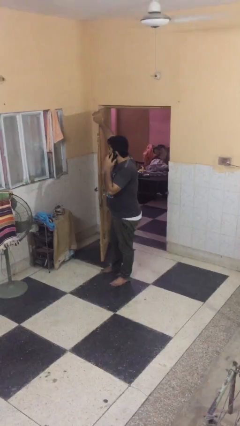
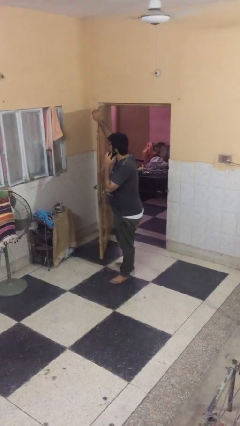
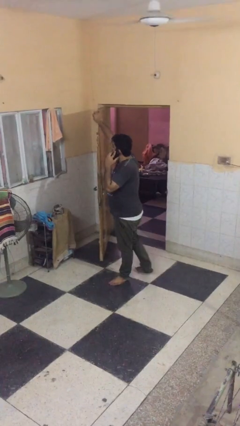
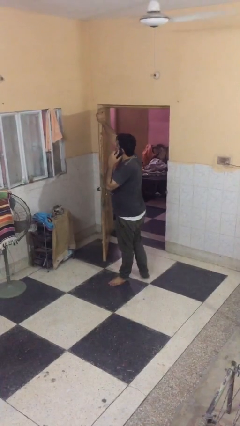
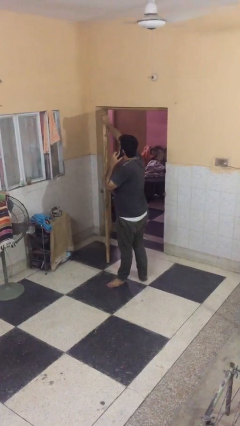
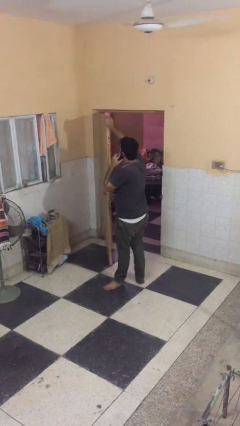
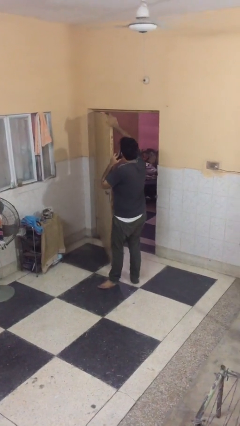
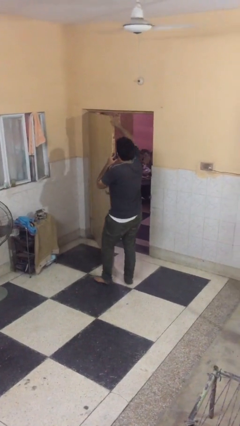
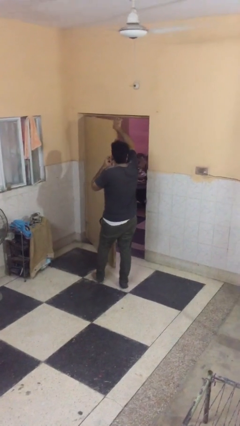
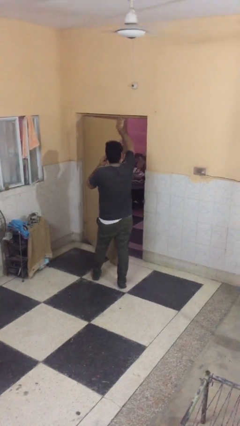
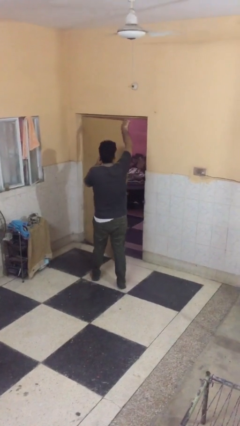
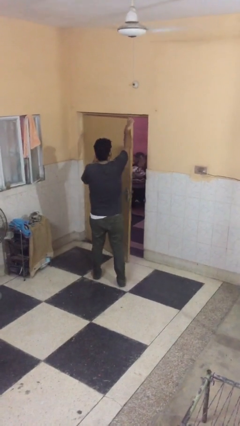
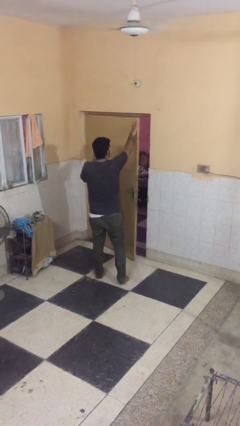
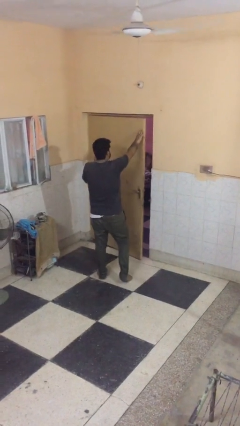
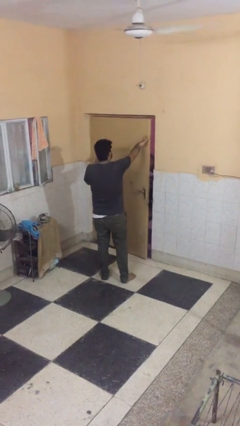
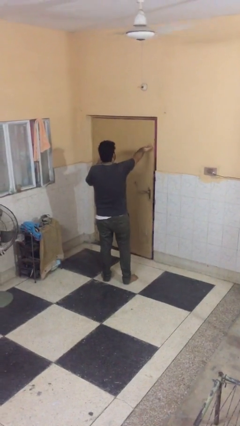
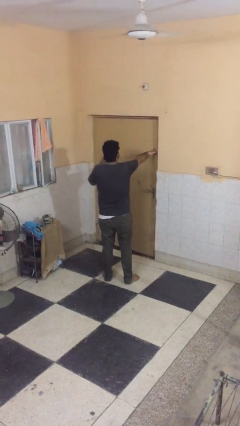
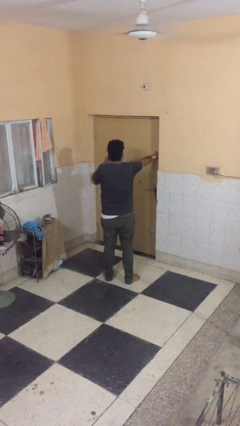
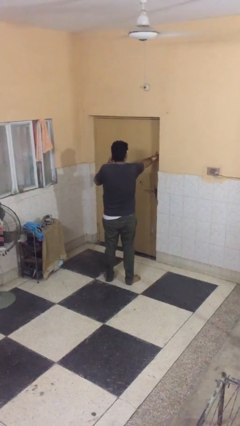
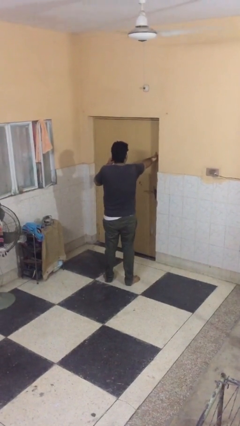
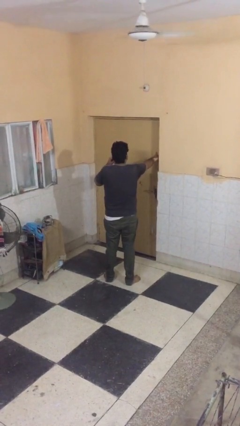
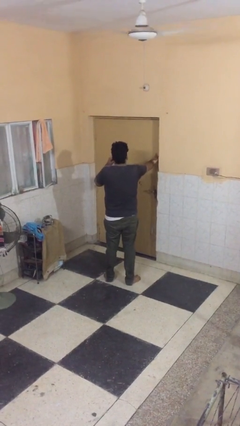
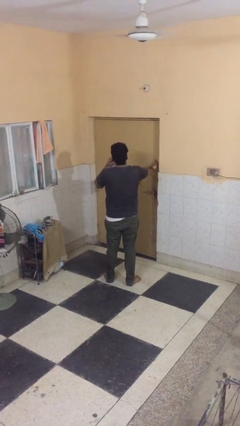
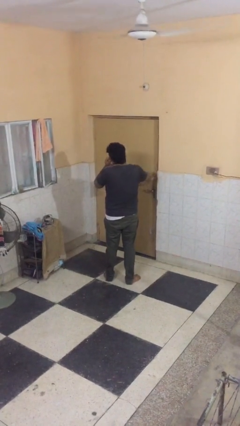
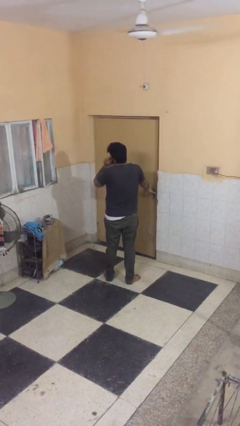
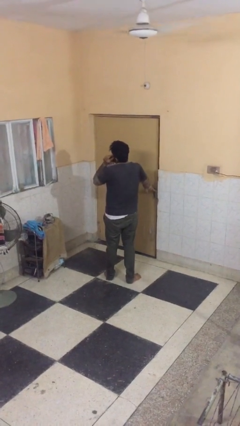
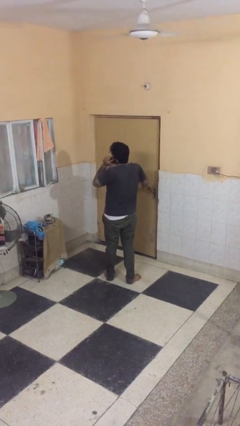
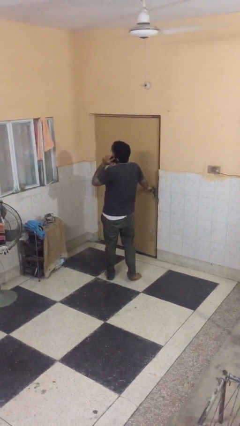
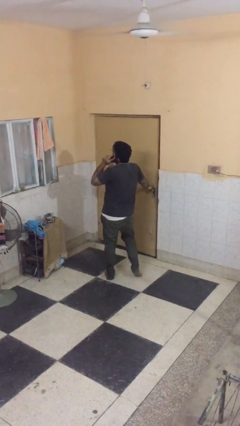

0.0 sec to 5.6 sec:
person closes facility door

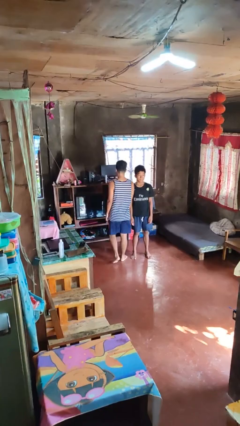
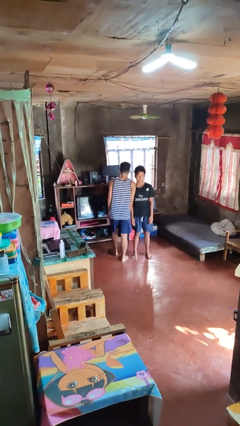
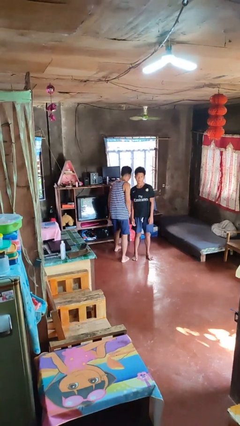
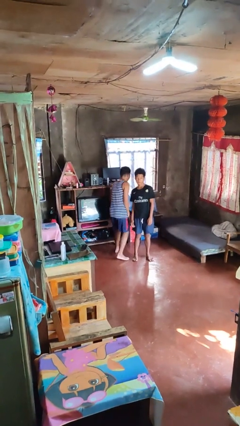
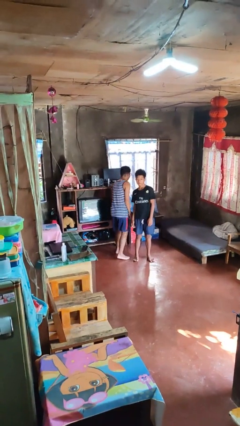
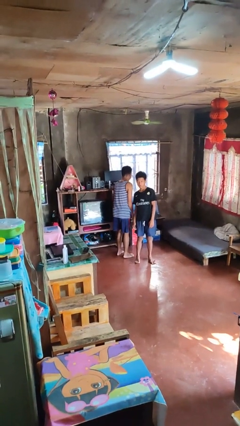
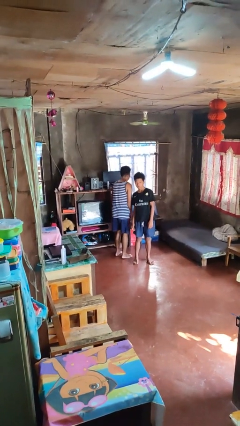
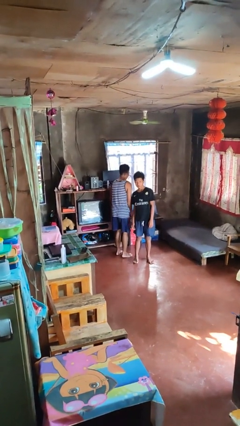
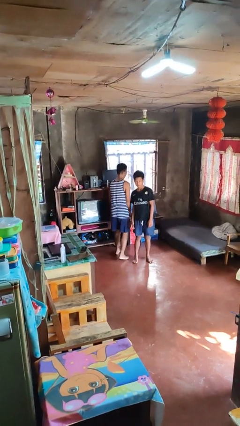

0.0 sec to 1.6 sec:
person bumps into person

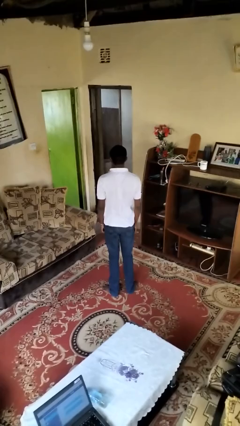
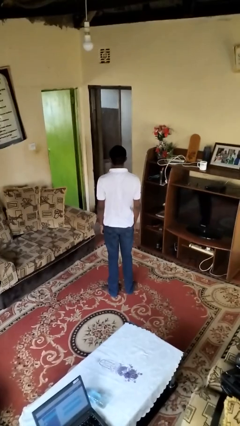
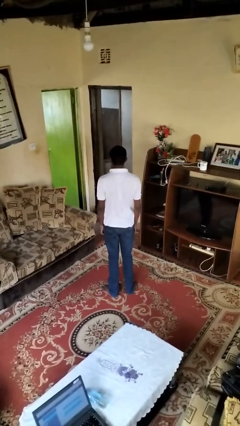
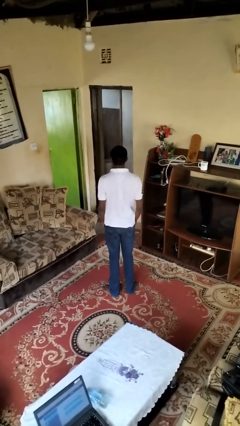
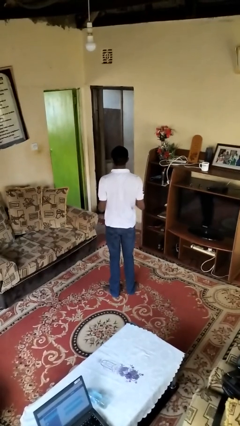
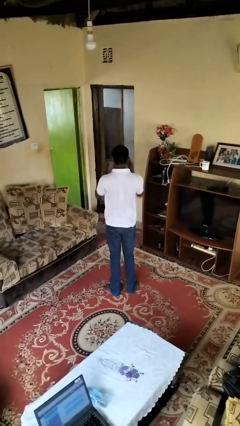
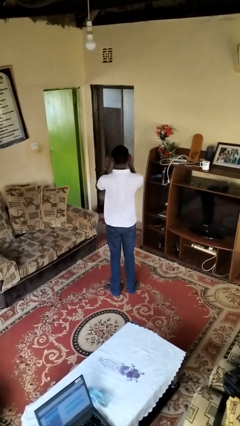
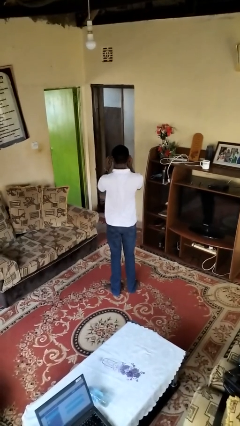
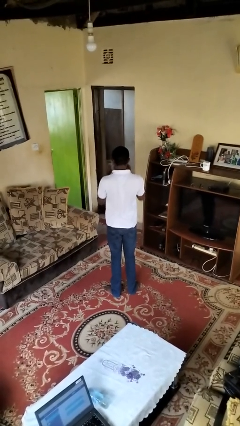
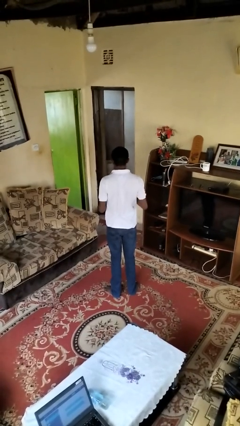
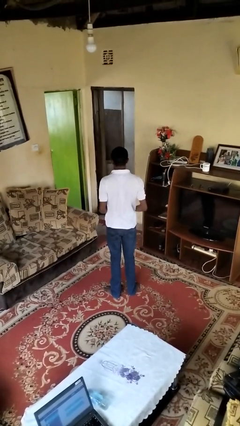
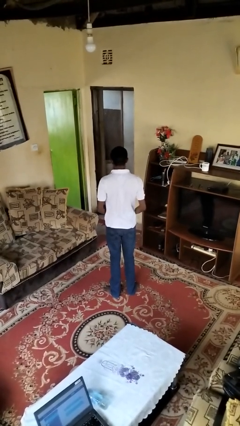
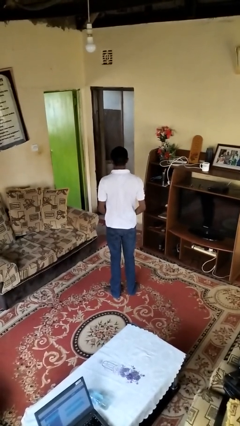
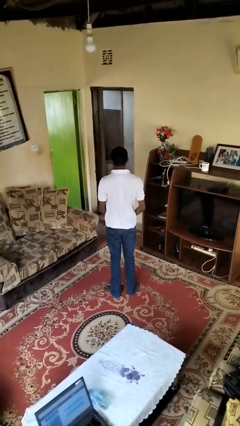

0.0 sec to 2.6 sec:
person takes off sunglasses

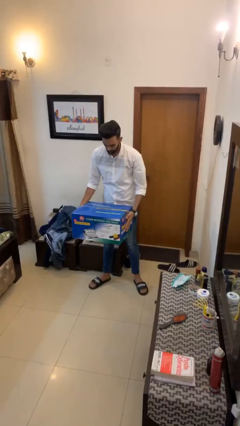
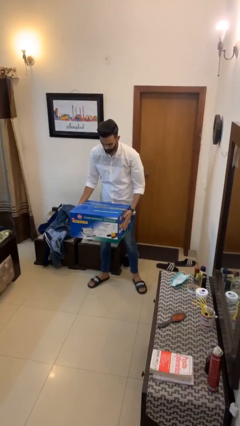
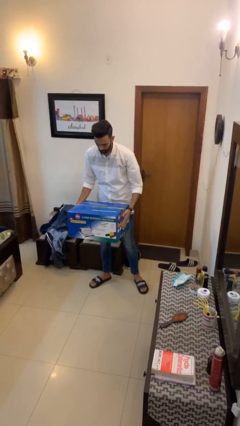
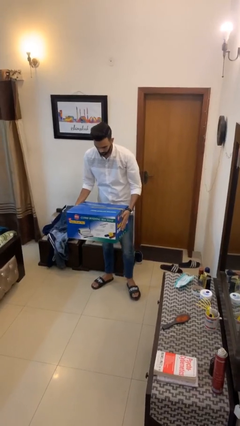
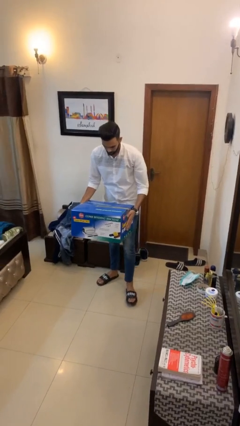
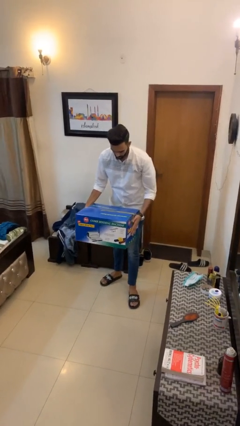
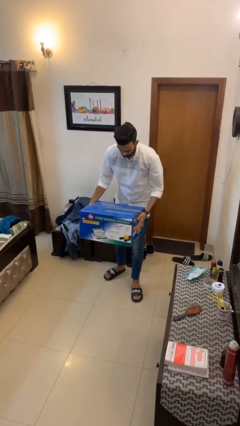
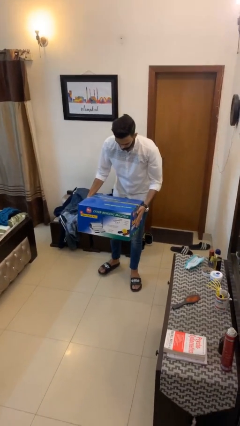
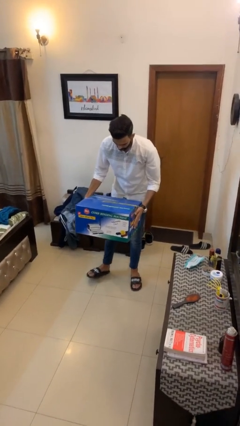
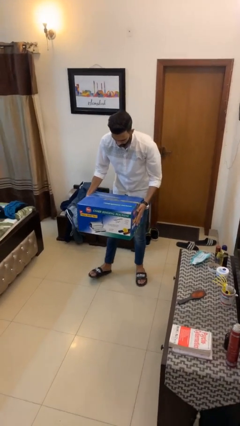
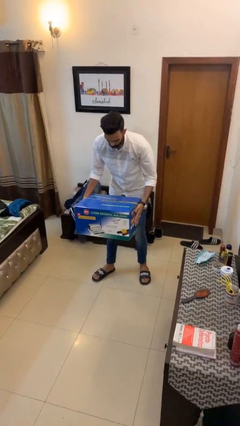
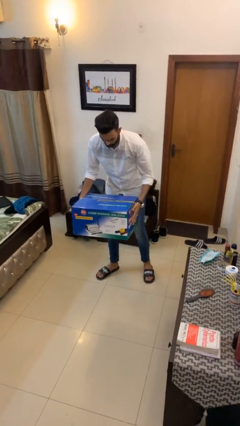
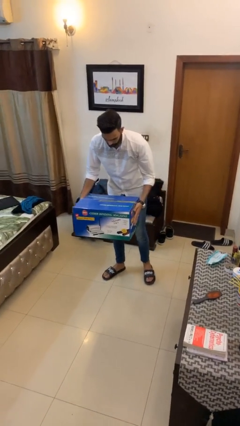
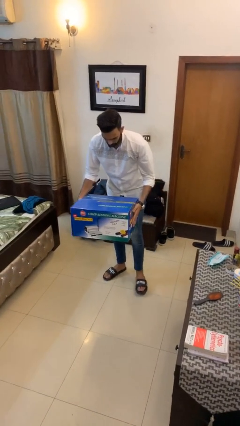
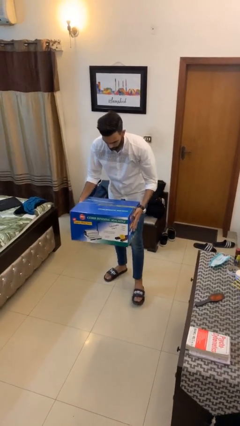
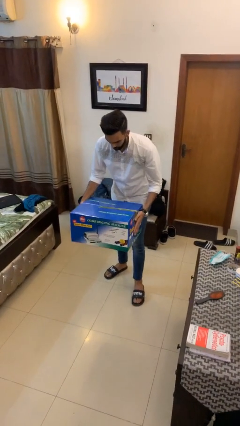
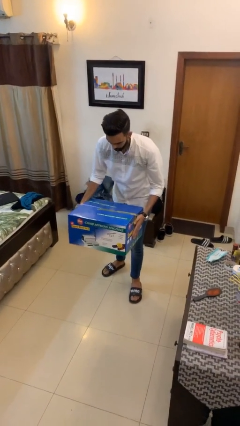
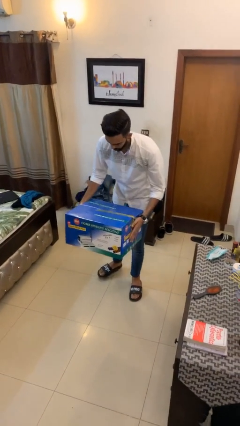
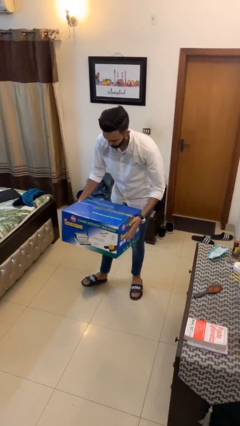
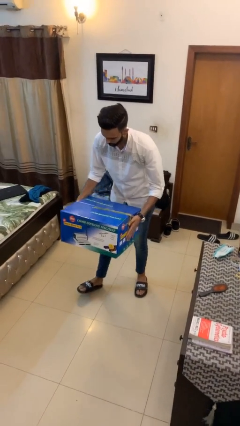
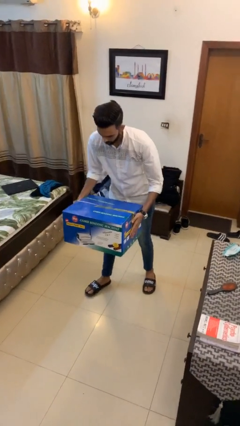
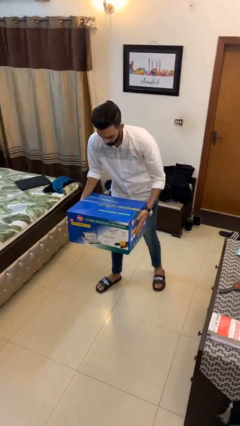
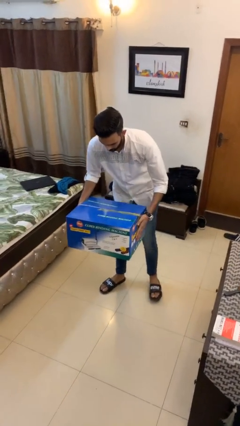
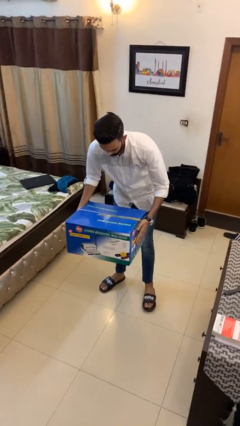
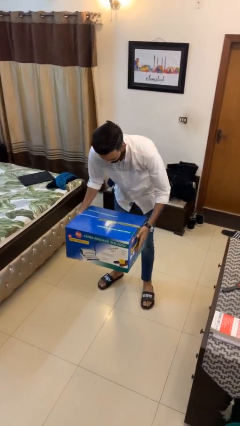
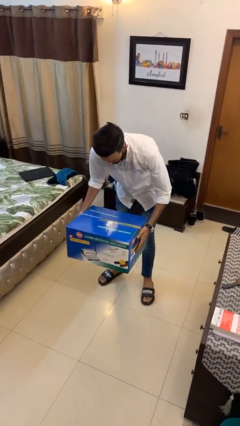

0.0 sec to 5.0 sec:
person carries heavy object

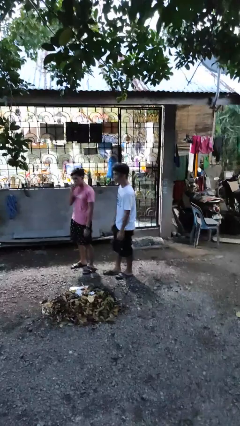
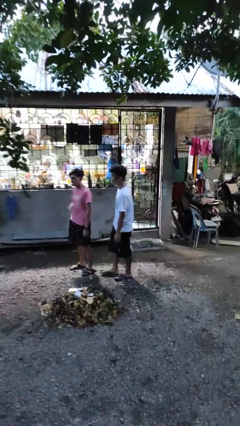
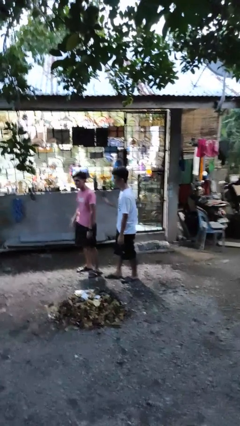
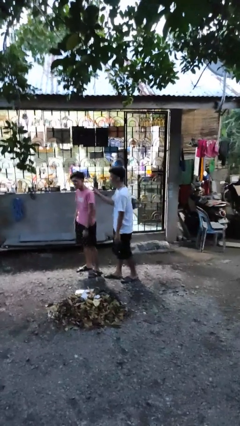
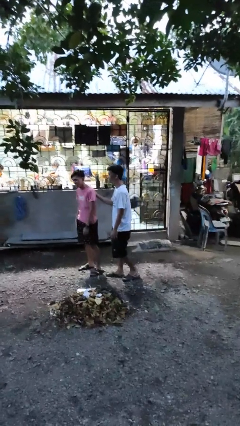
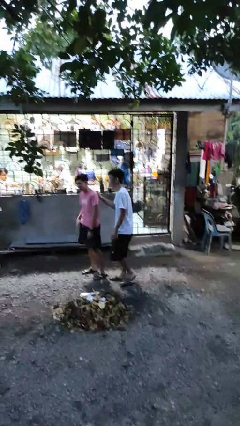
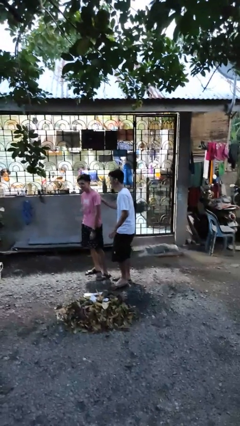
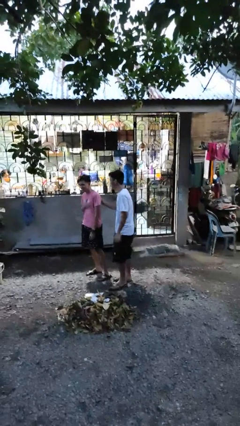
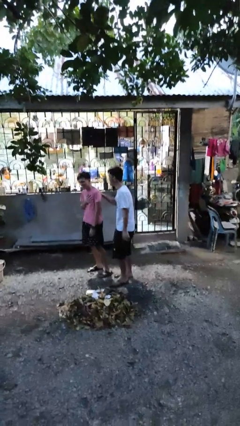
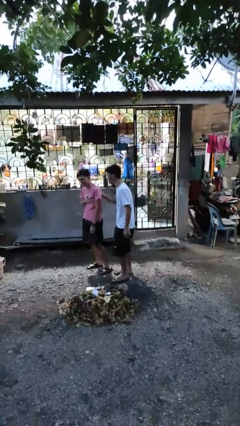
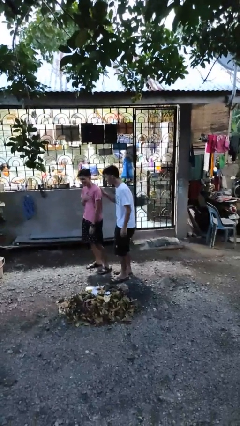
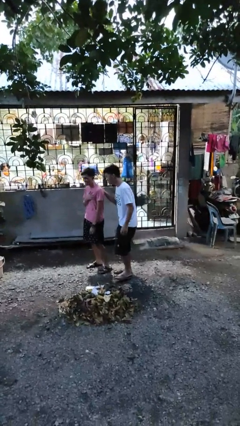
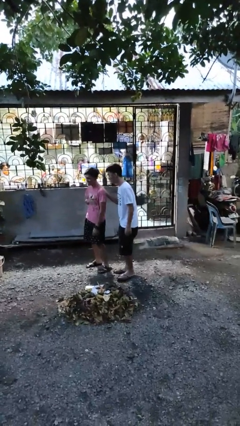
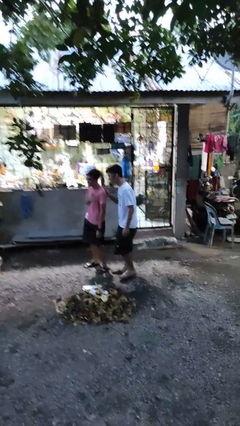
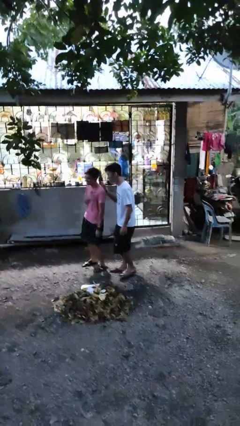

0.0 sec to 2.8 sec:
person touches back of person

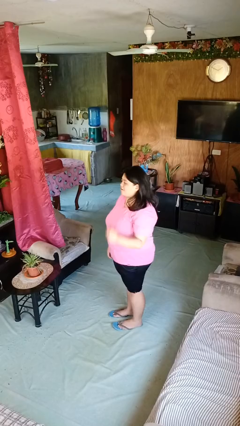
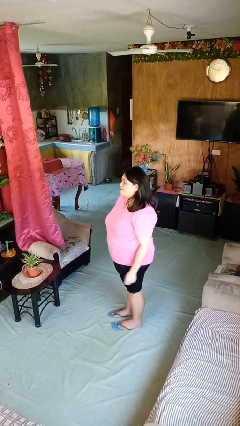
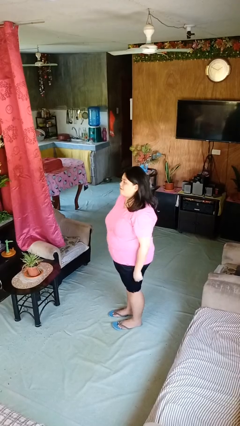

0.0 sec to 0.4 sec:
person gestures lower hand
